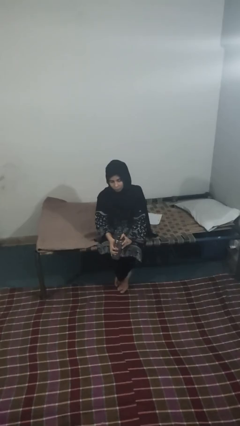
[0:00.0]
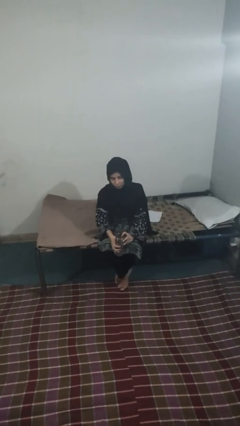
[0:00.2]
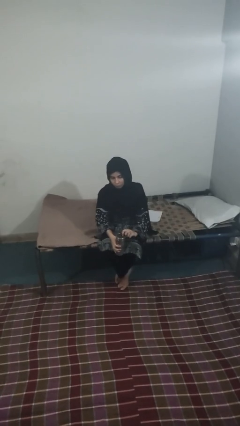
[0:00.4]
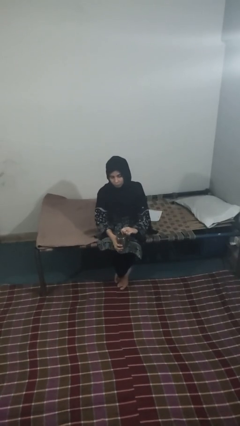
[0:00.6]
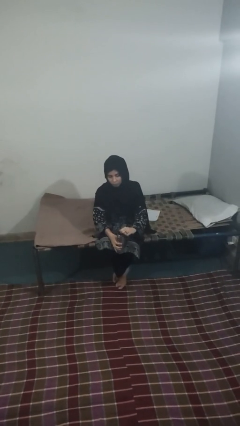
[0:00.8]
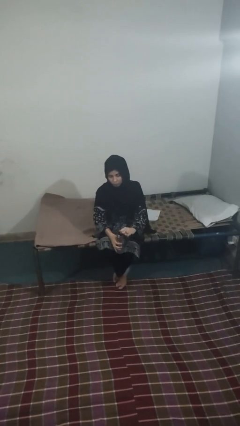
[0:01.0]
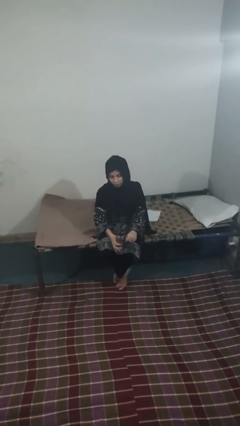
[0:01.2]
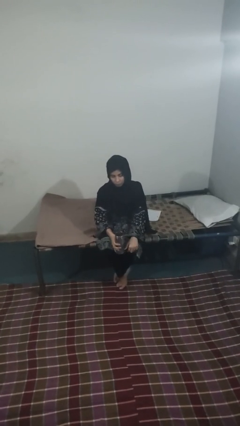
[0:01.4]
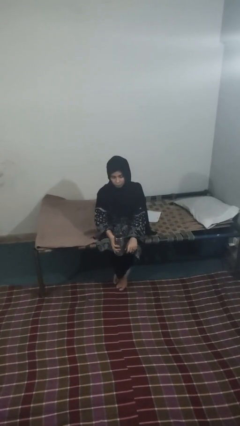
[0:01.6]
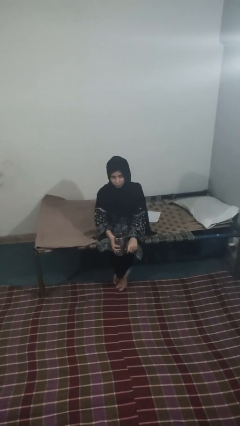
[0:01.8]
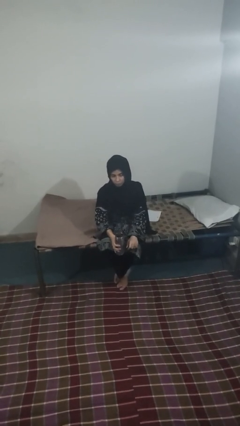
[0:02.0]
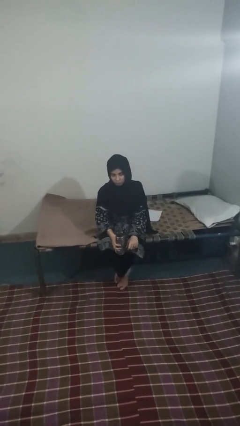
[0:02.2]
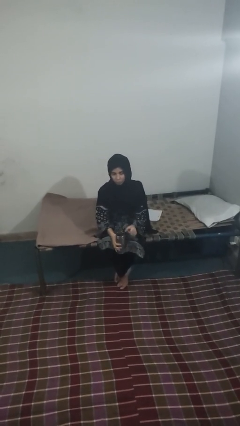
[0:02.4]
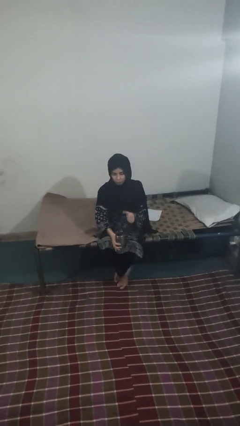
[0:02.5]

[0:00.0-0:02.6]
person opens beverage can

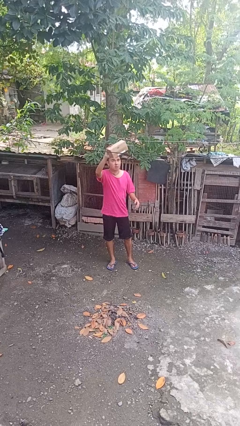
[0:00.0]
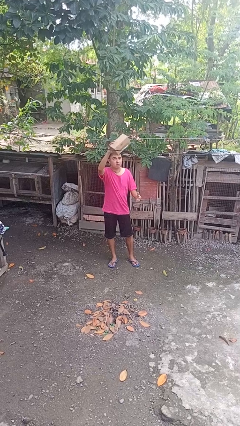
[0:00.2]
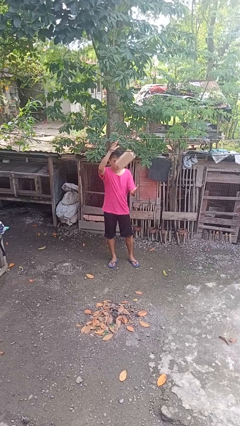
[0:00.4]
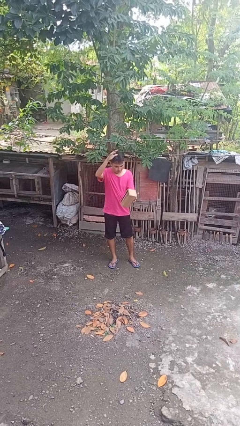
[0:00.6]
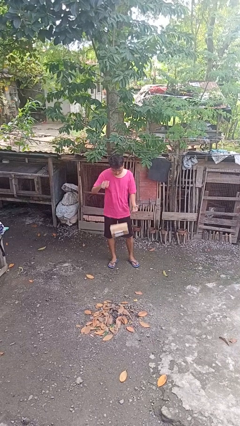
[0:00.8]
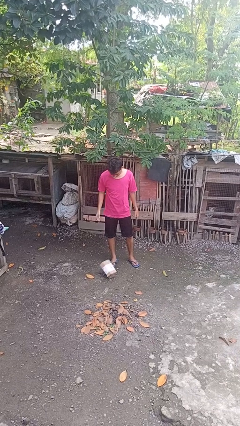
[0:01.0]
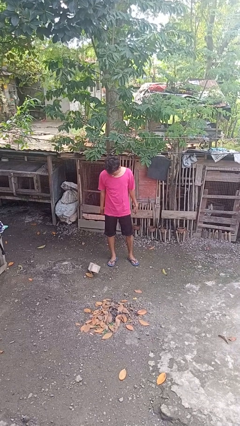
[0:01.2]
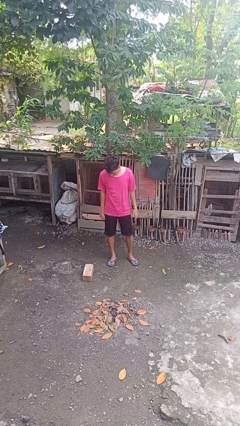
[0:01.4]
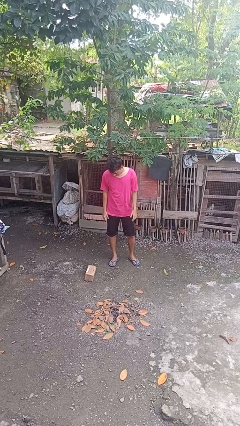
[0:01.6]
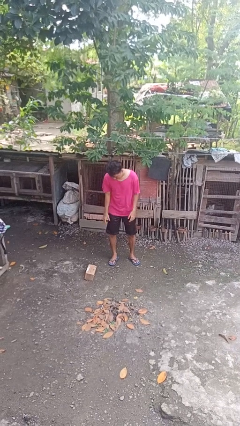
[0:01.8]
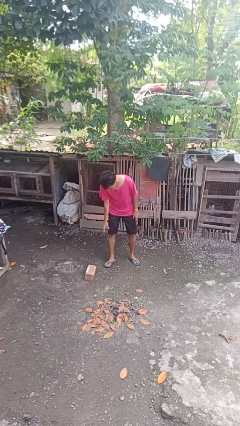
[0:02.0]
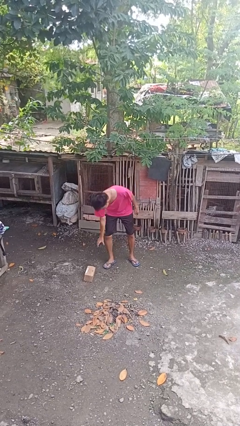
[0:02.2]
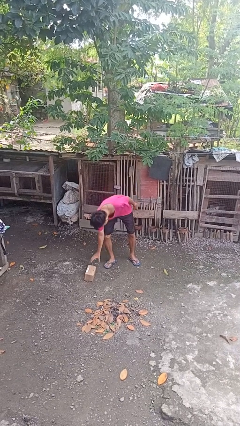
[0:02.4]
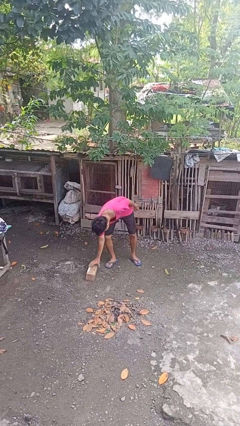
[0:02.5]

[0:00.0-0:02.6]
person drops object

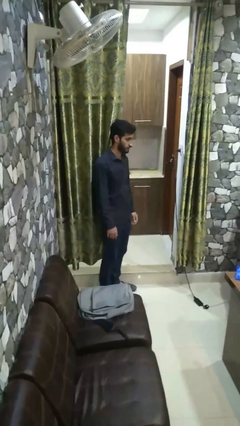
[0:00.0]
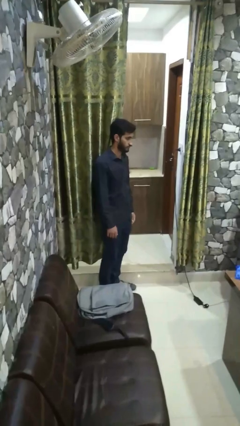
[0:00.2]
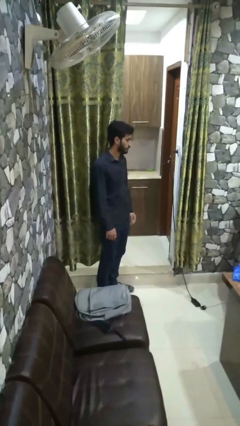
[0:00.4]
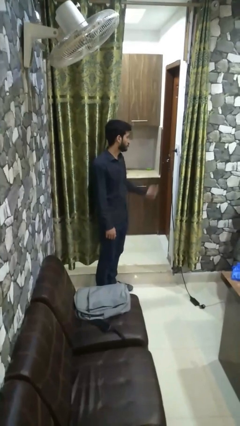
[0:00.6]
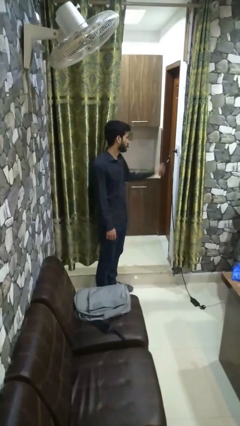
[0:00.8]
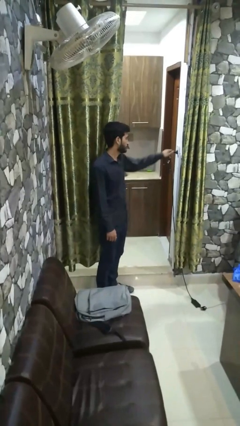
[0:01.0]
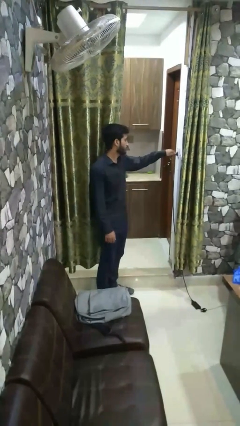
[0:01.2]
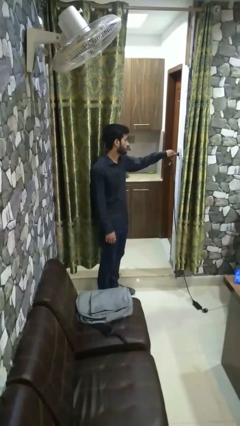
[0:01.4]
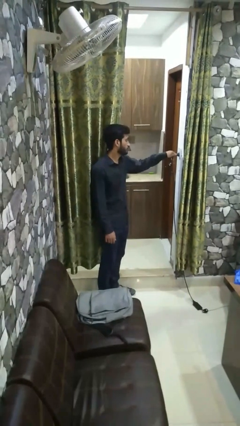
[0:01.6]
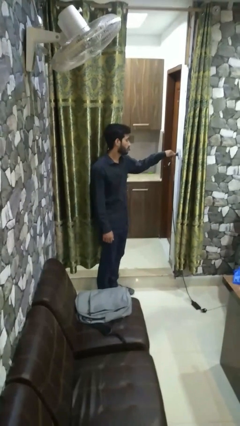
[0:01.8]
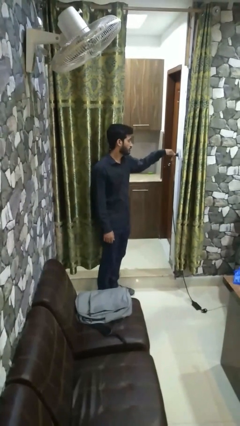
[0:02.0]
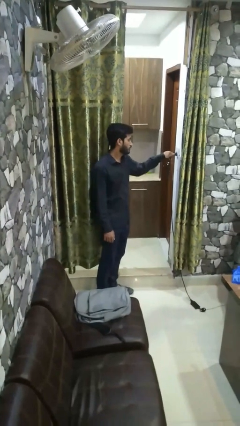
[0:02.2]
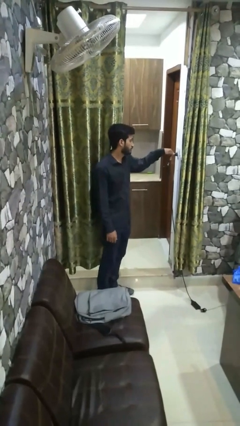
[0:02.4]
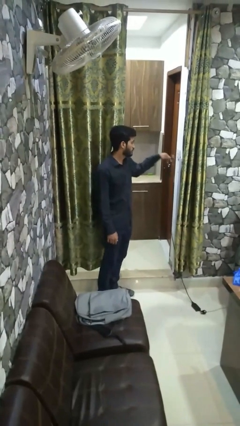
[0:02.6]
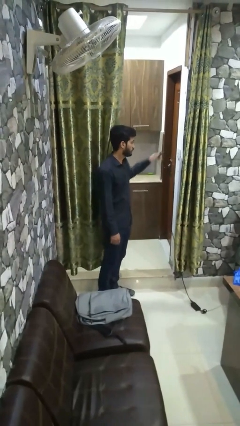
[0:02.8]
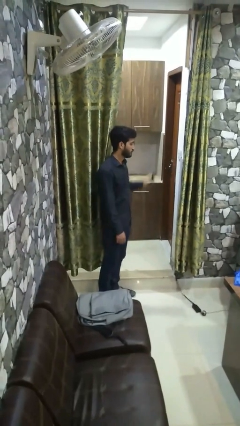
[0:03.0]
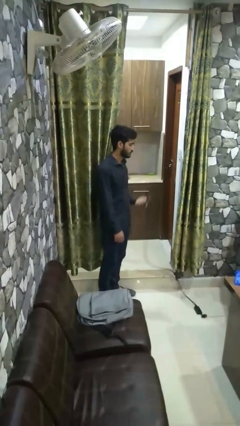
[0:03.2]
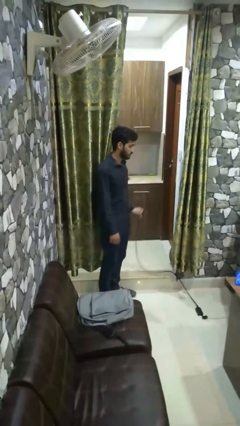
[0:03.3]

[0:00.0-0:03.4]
person unplugs from electrical socket

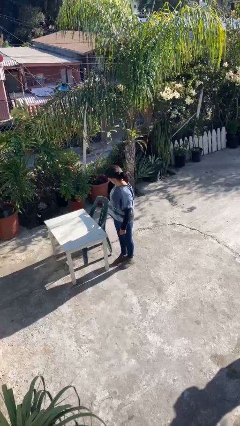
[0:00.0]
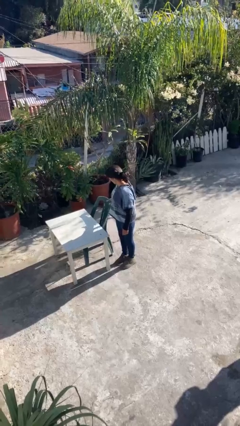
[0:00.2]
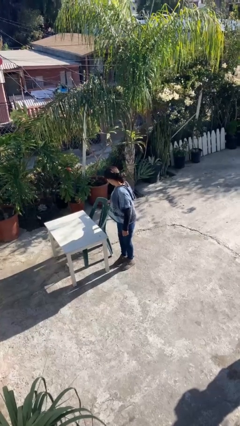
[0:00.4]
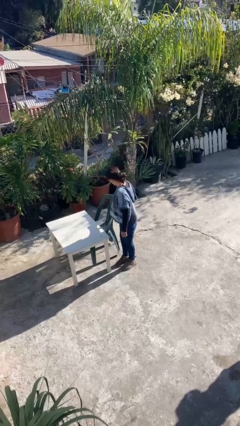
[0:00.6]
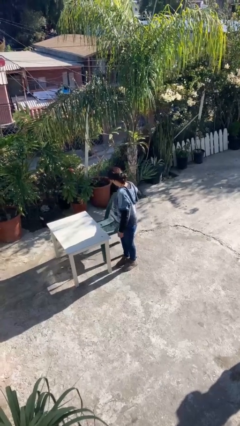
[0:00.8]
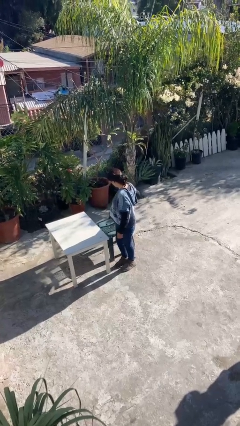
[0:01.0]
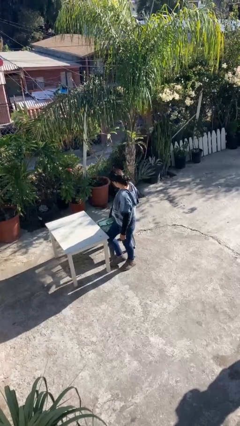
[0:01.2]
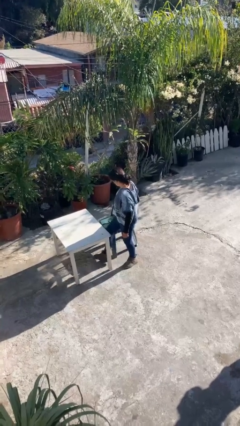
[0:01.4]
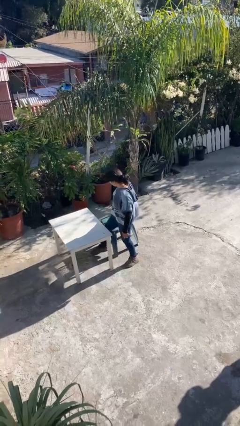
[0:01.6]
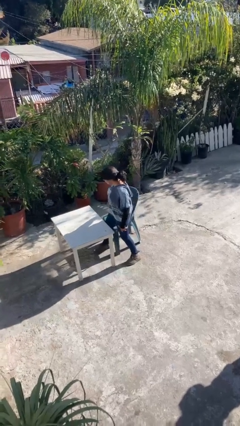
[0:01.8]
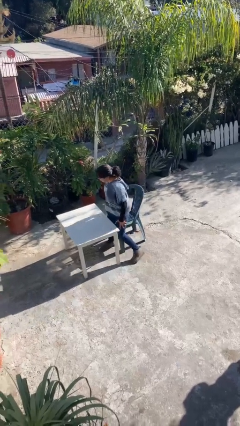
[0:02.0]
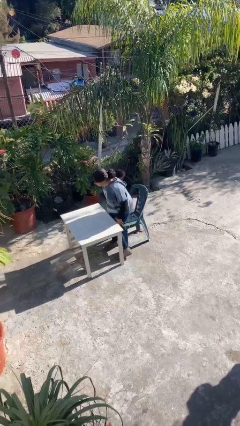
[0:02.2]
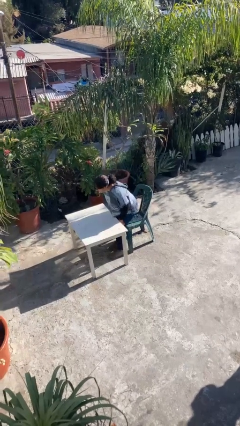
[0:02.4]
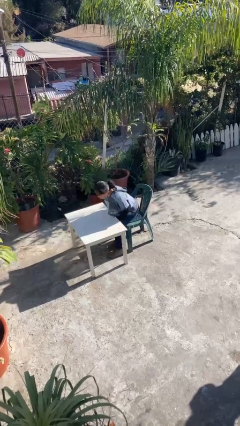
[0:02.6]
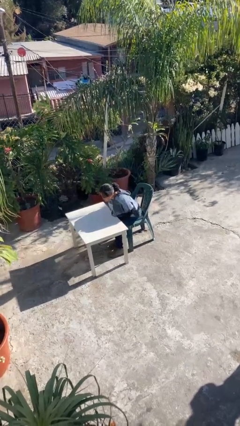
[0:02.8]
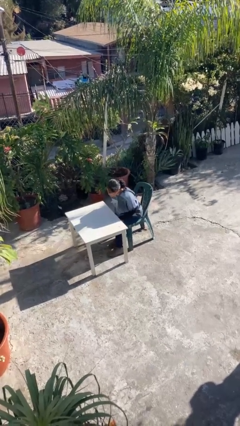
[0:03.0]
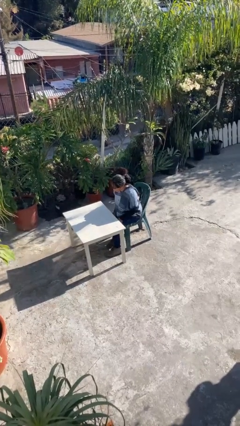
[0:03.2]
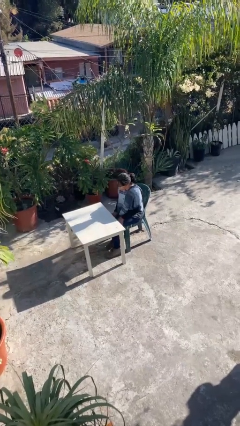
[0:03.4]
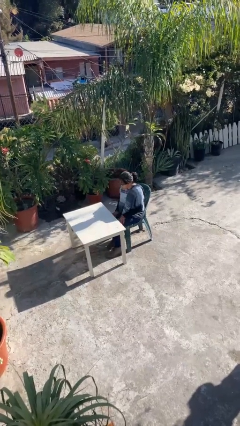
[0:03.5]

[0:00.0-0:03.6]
person sits down

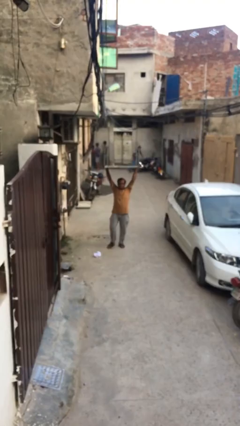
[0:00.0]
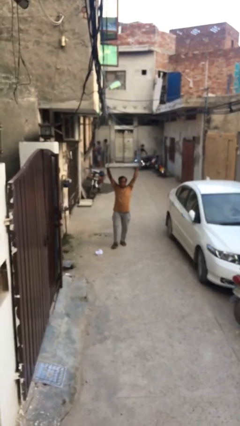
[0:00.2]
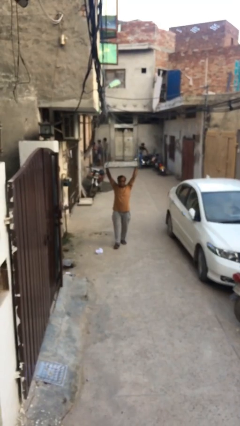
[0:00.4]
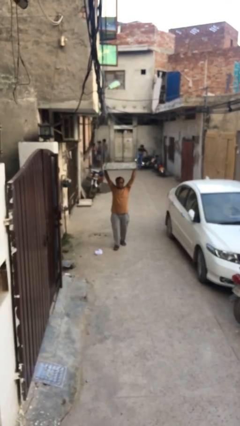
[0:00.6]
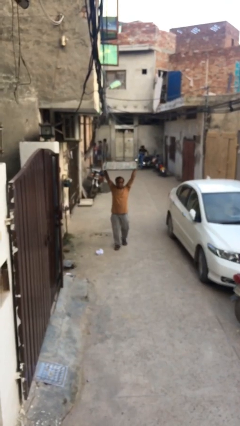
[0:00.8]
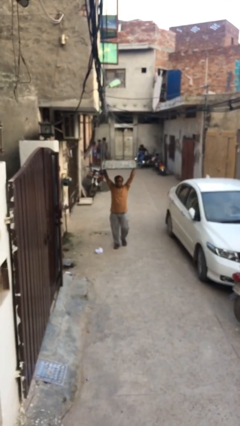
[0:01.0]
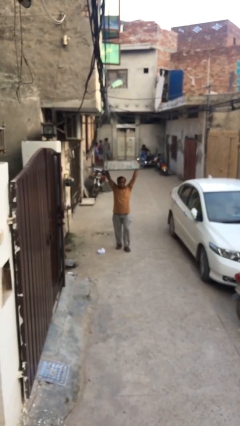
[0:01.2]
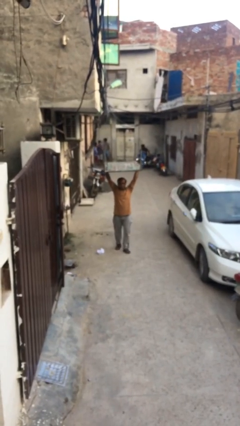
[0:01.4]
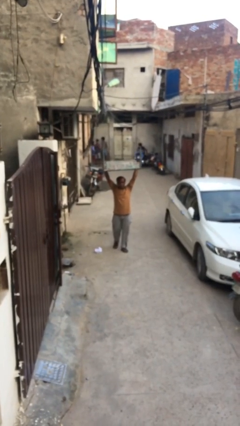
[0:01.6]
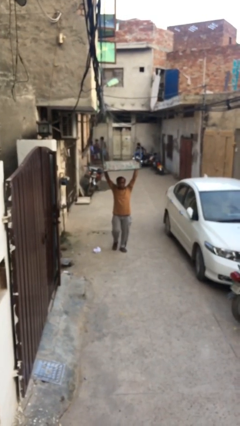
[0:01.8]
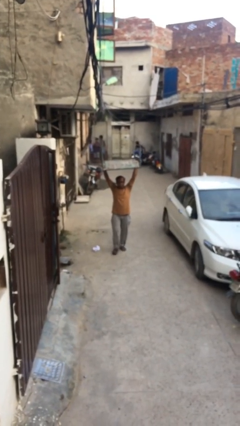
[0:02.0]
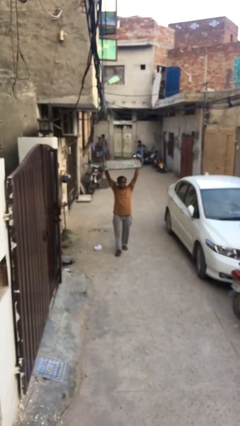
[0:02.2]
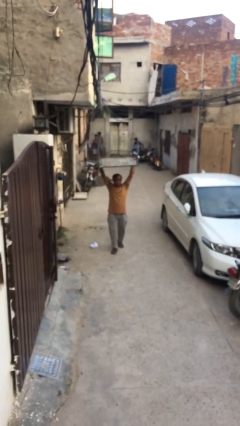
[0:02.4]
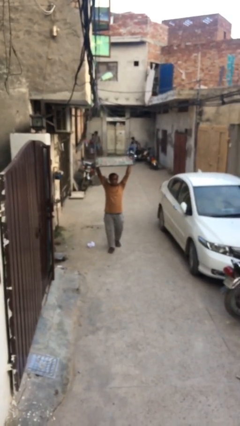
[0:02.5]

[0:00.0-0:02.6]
person carries heavy object

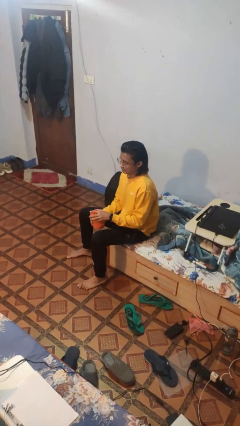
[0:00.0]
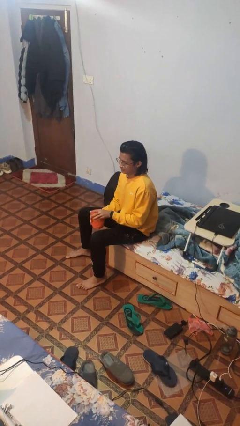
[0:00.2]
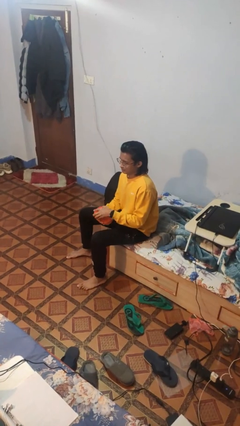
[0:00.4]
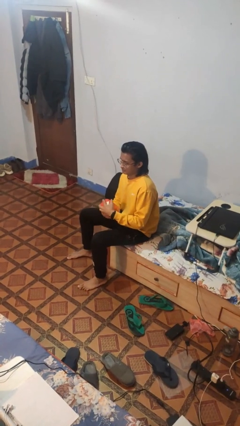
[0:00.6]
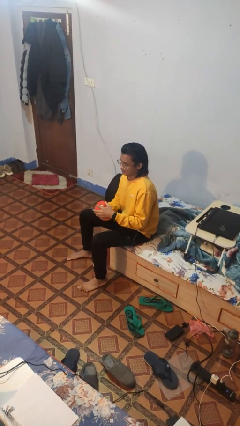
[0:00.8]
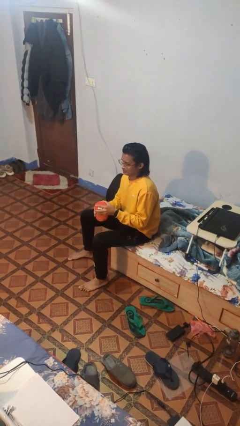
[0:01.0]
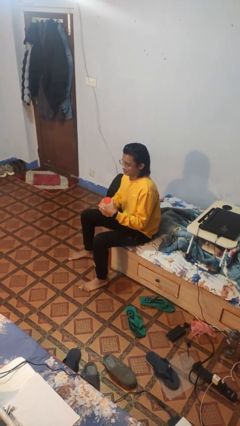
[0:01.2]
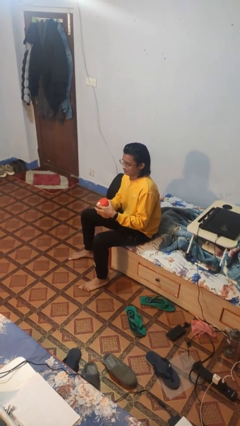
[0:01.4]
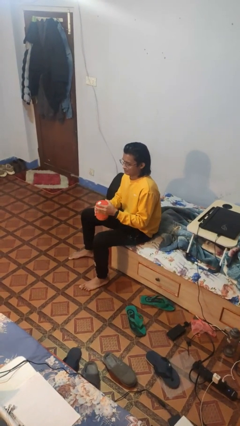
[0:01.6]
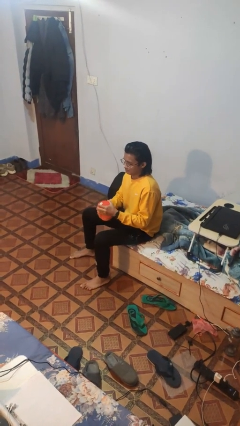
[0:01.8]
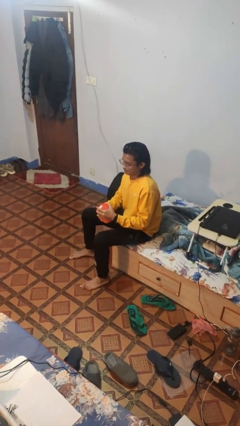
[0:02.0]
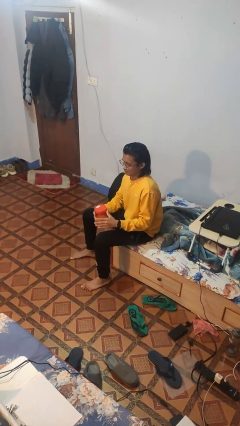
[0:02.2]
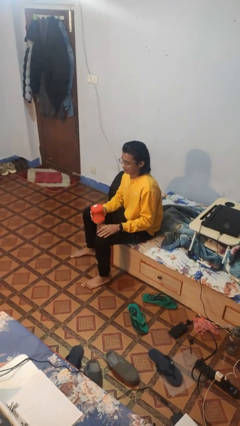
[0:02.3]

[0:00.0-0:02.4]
person closes jar
